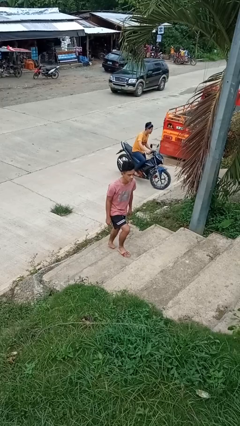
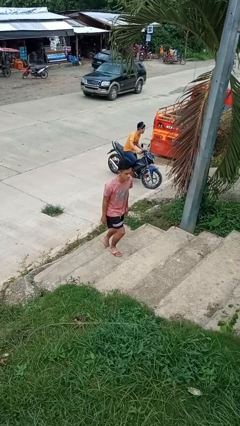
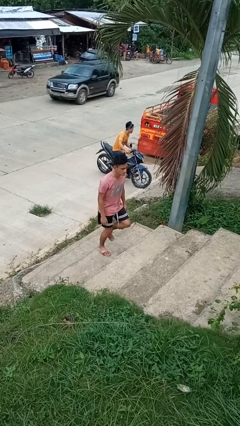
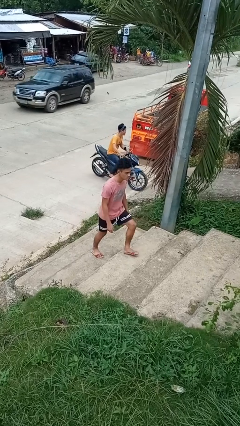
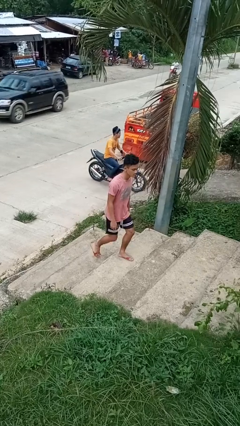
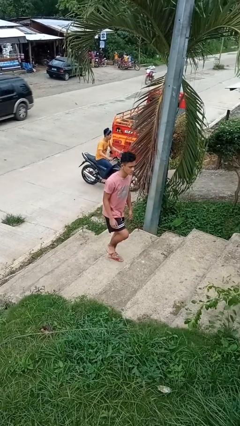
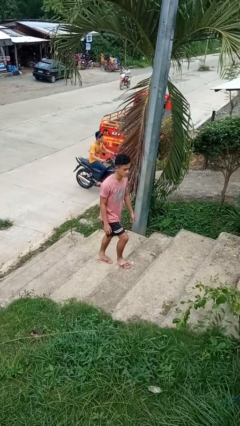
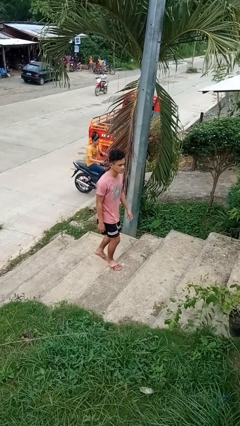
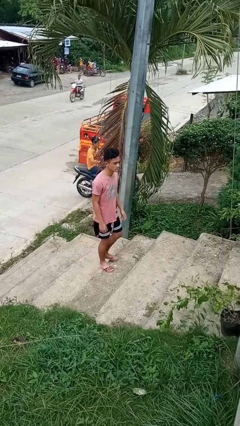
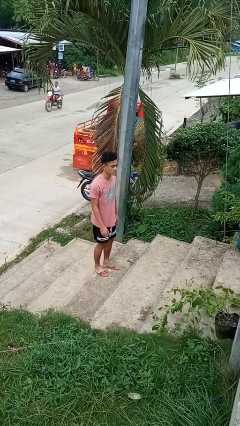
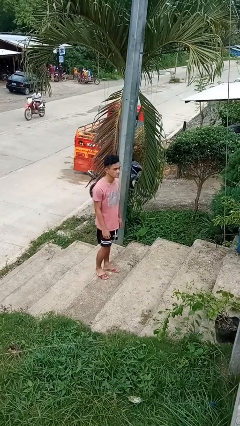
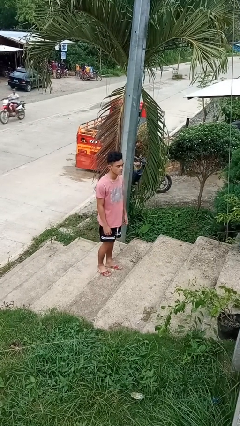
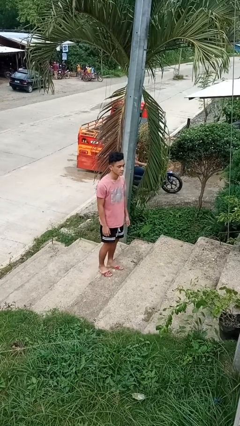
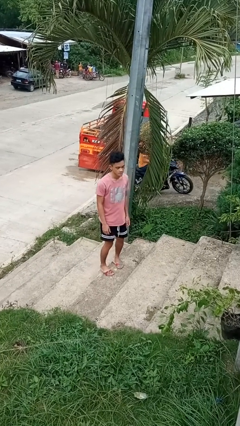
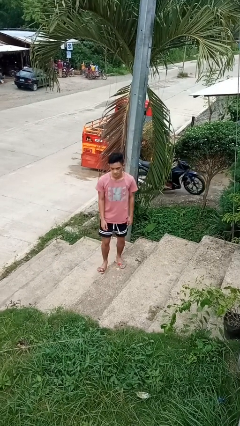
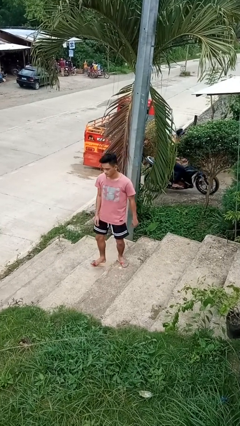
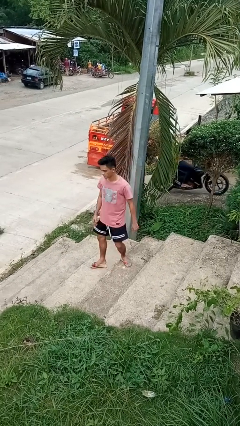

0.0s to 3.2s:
person climbs up stairs

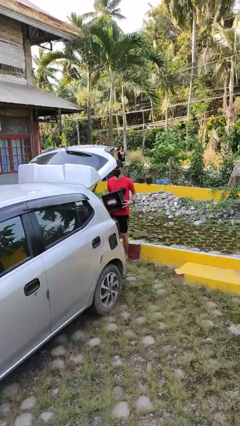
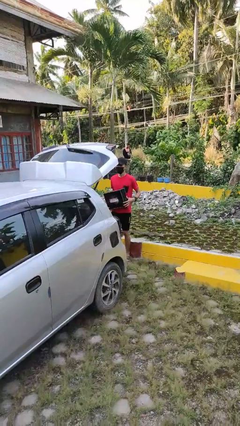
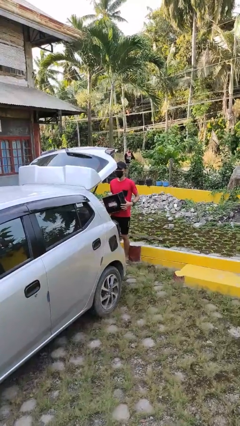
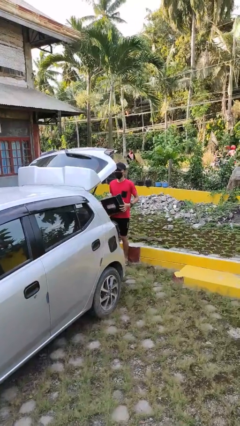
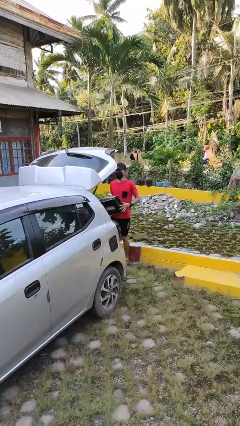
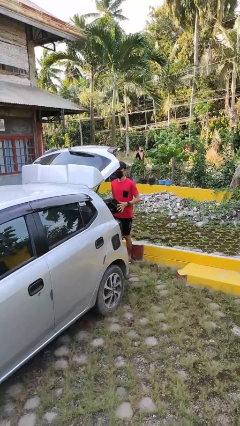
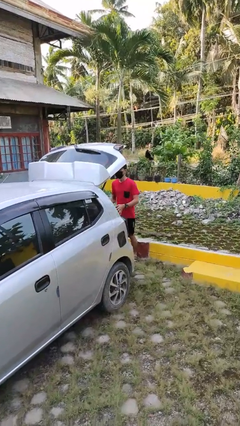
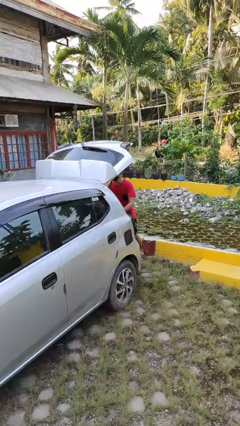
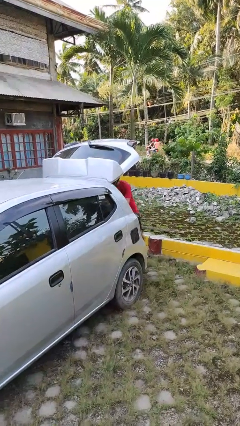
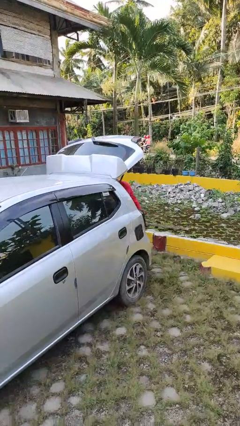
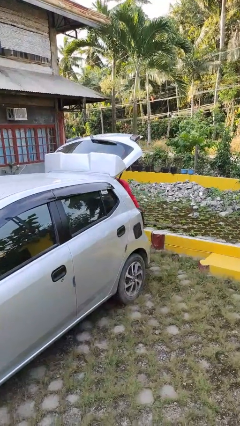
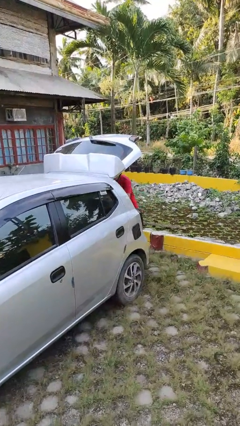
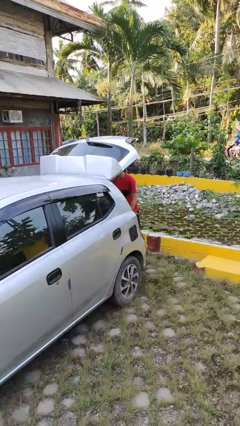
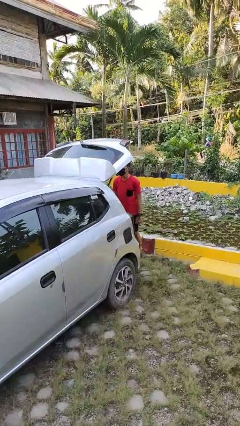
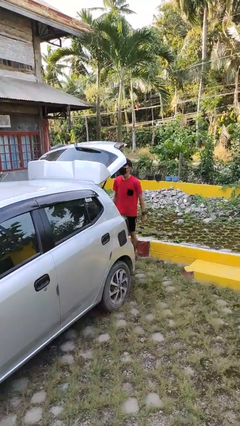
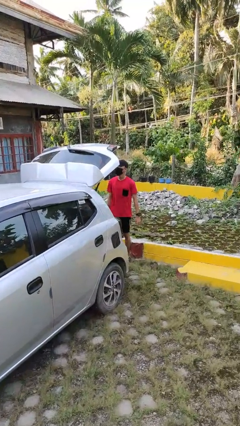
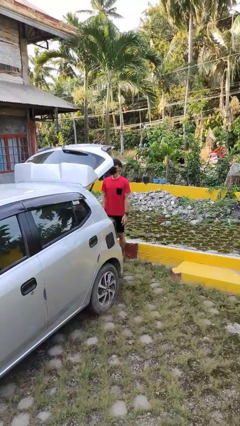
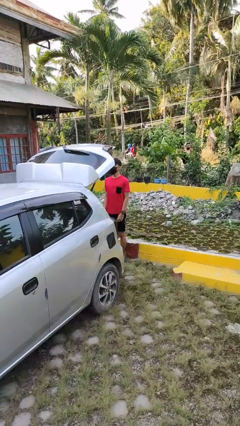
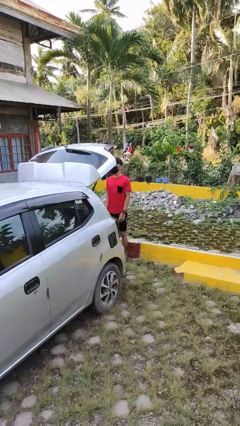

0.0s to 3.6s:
person loads car

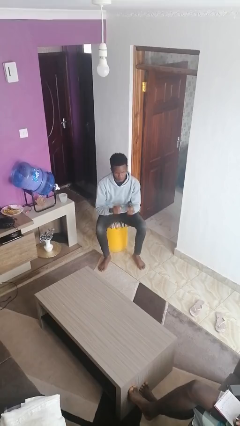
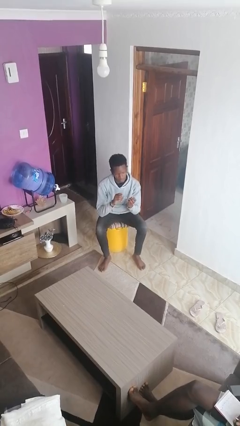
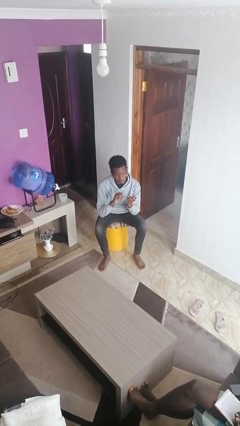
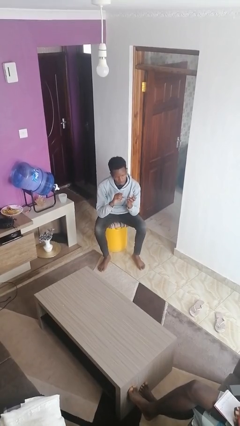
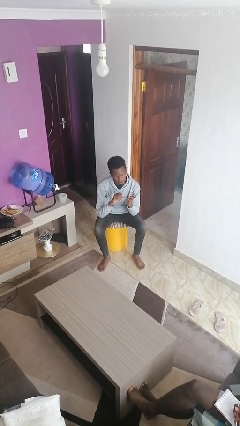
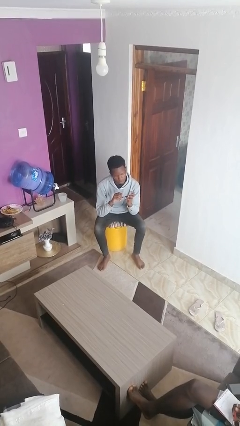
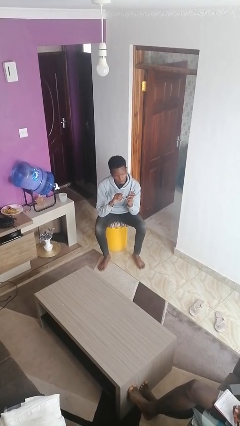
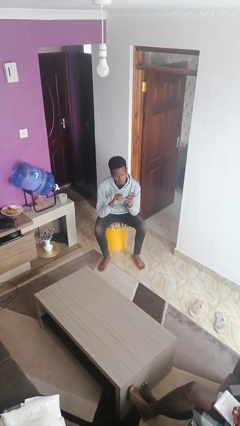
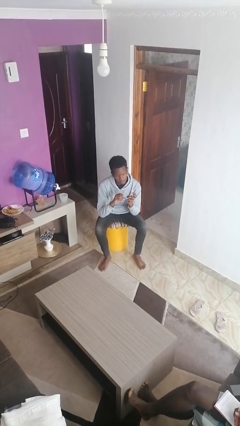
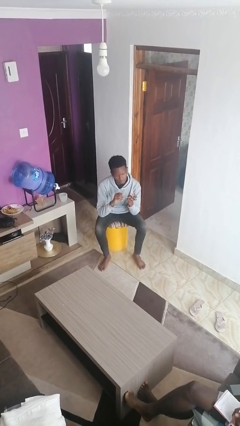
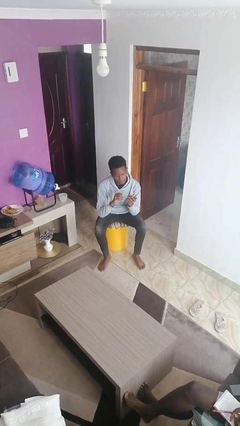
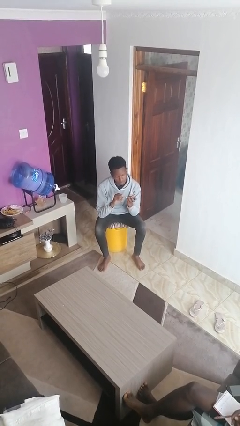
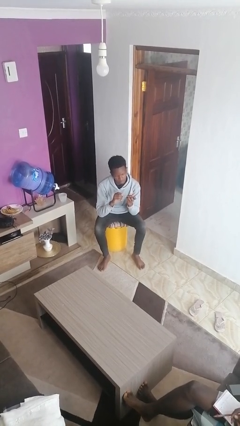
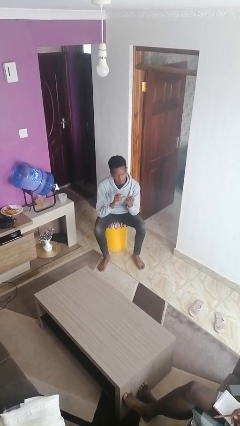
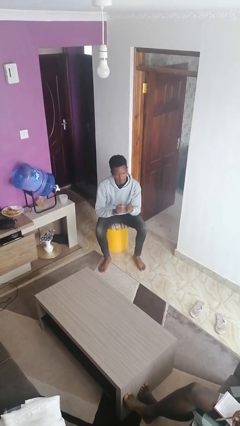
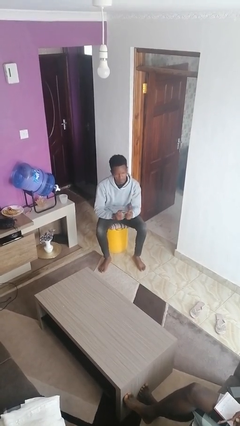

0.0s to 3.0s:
person clips fingernails

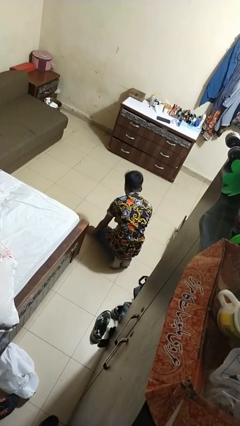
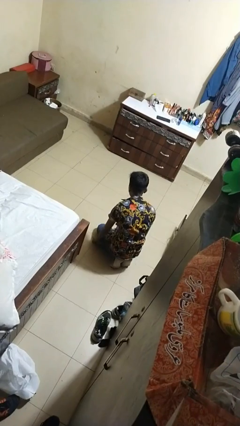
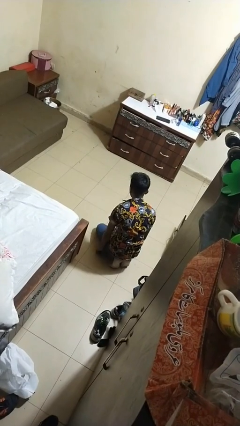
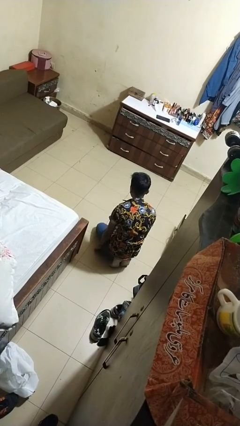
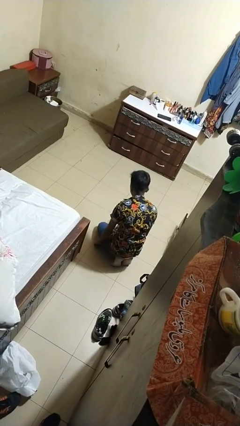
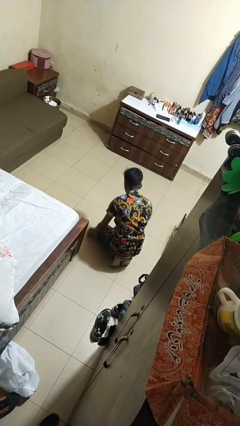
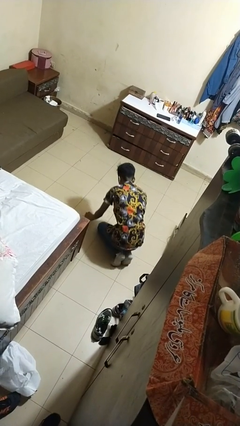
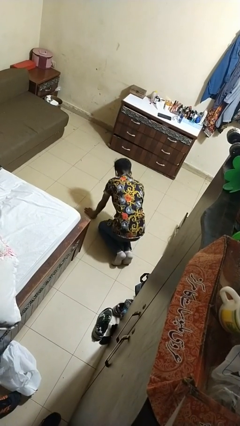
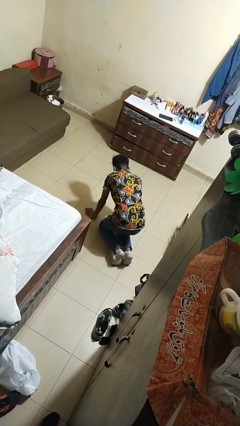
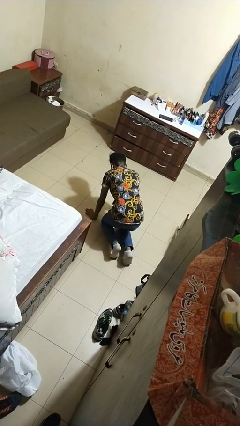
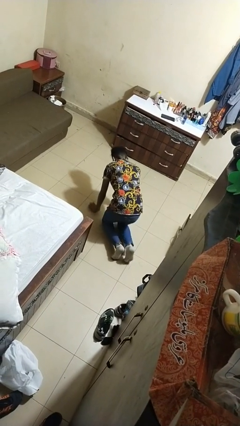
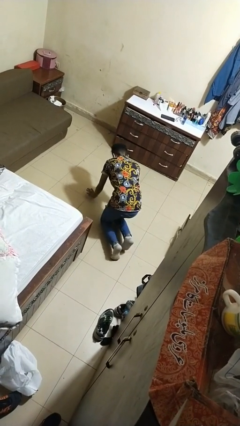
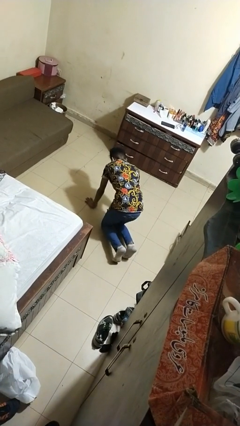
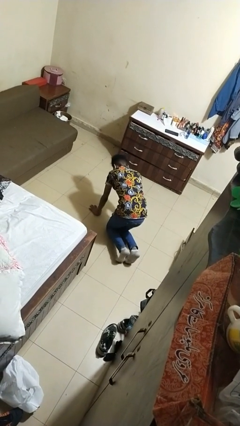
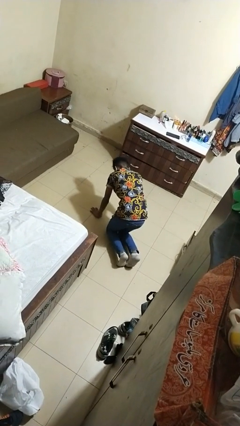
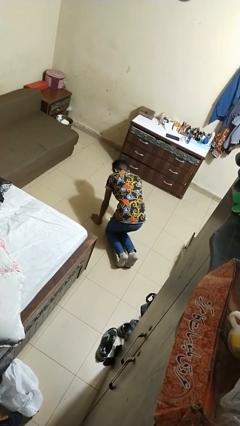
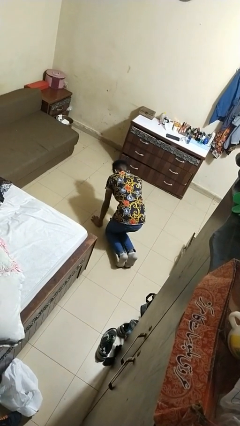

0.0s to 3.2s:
person crawls

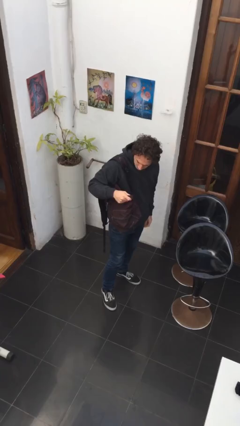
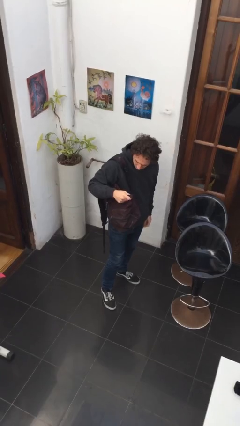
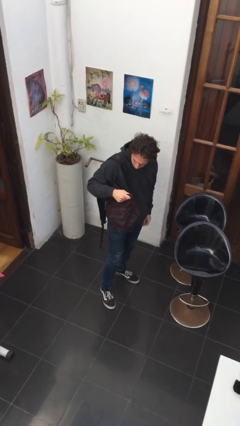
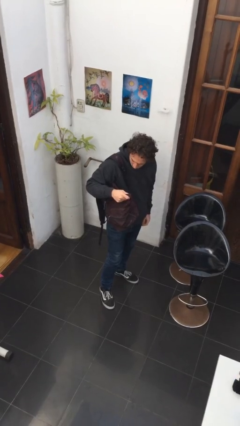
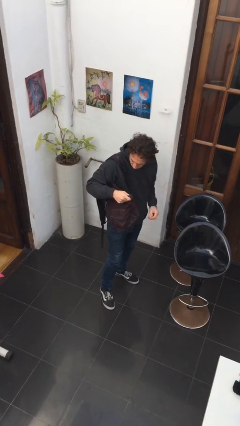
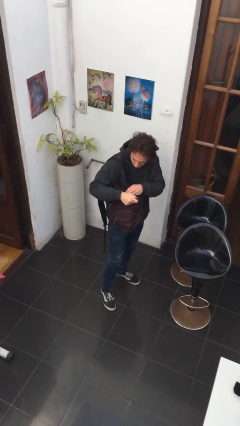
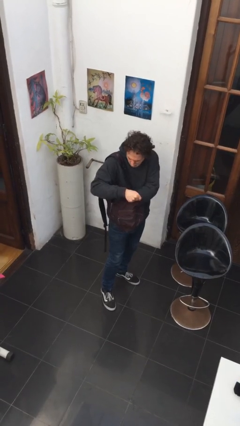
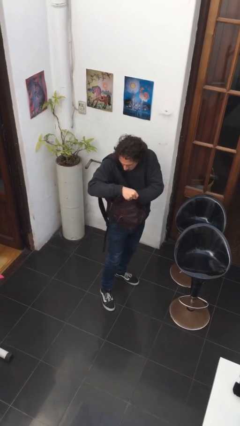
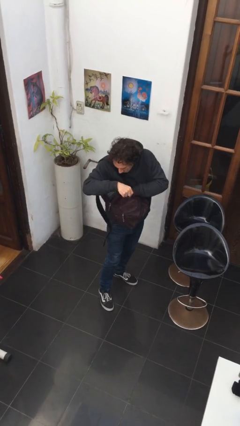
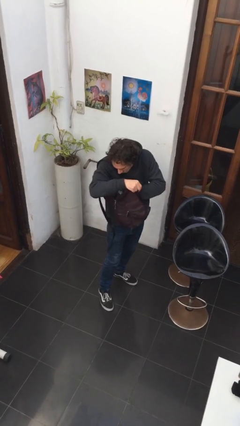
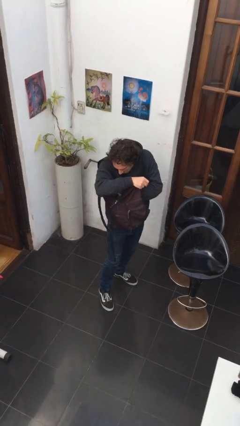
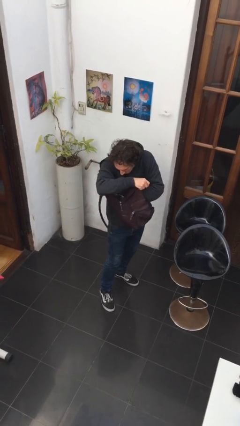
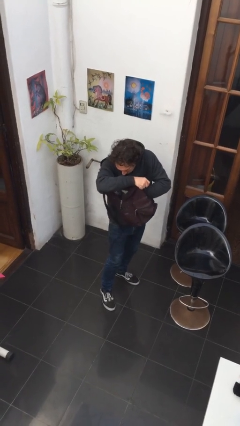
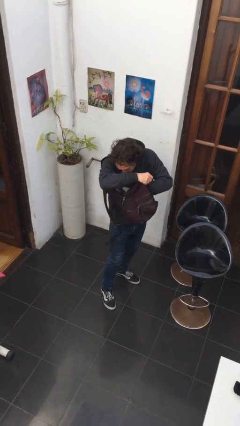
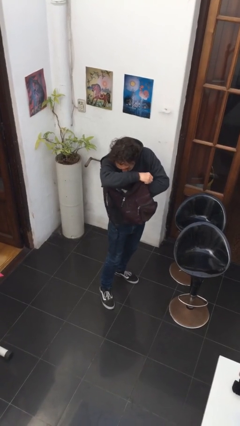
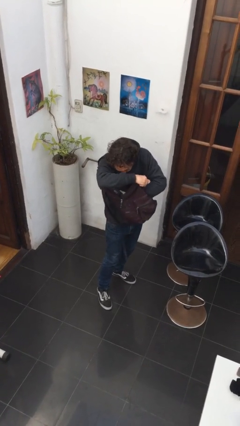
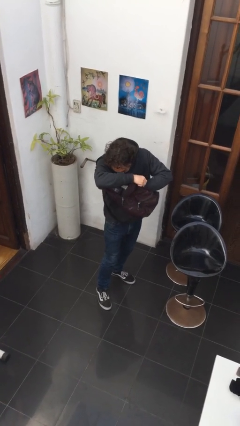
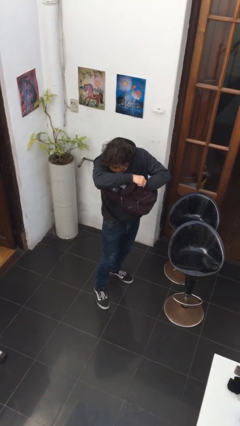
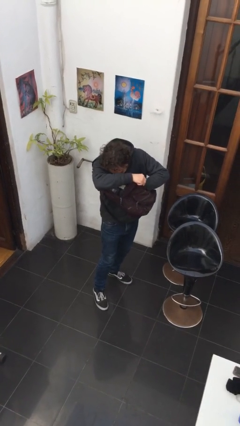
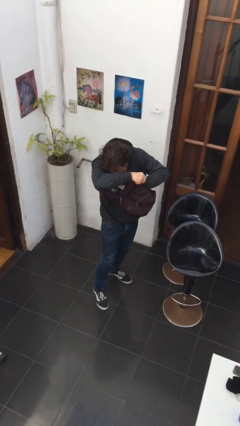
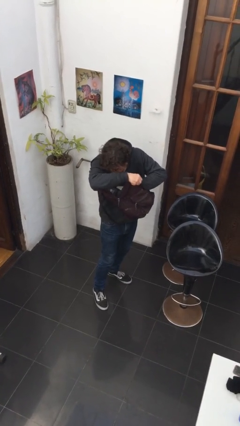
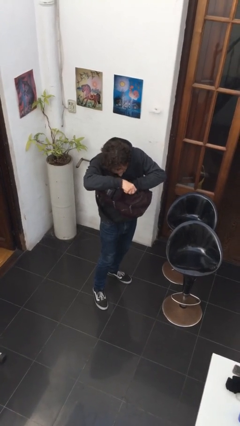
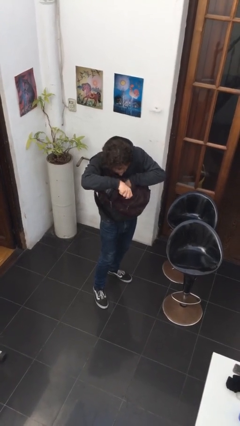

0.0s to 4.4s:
person searches in backpack
